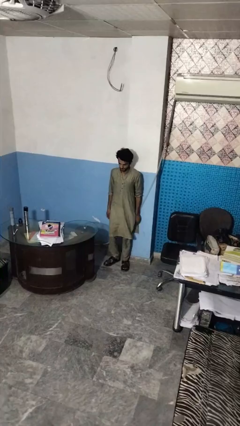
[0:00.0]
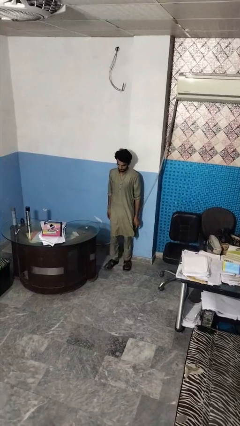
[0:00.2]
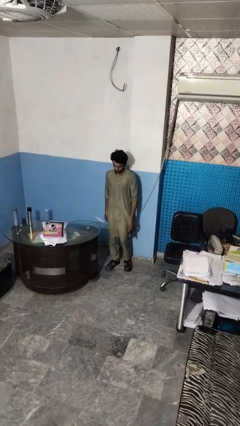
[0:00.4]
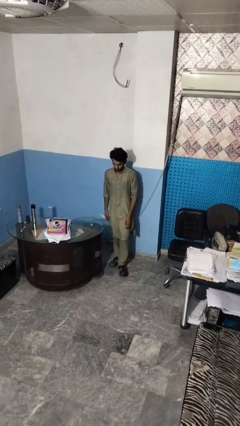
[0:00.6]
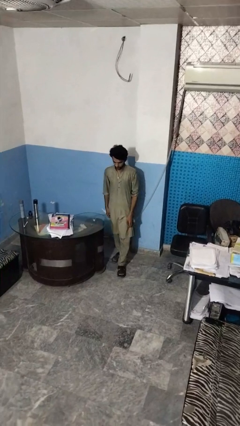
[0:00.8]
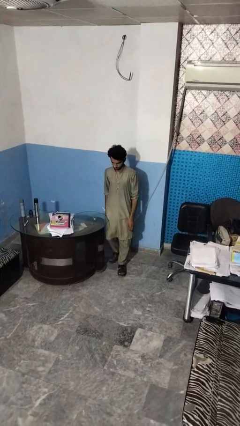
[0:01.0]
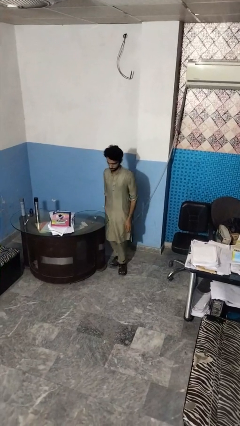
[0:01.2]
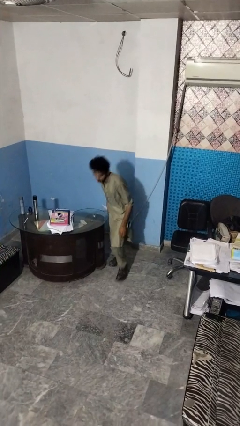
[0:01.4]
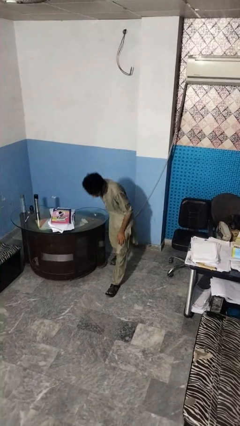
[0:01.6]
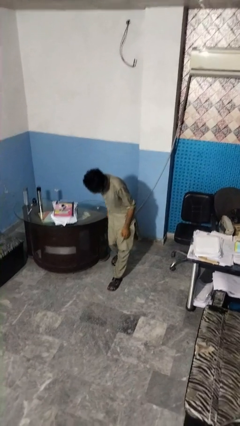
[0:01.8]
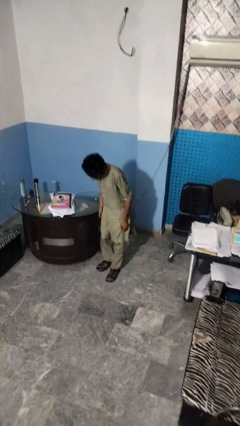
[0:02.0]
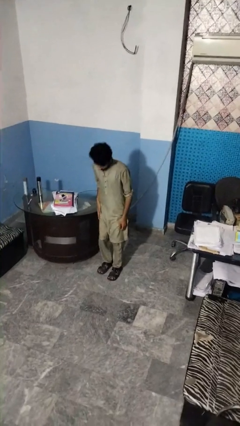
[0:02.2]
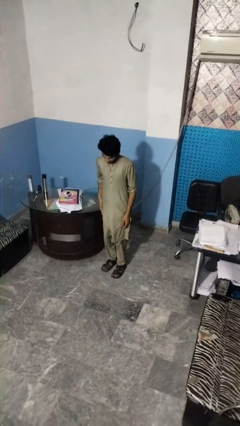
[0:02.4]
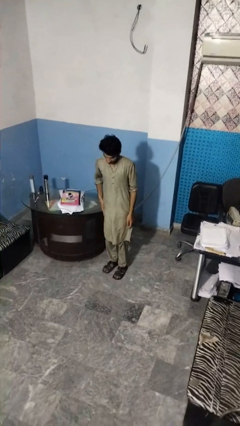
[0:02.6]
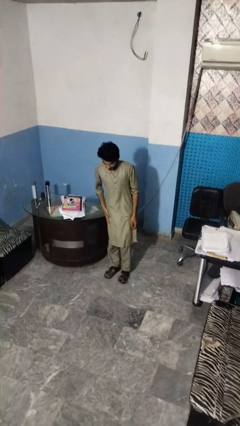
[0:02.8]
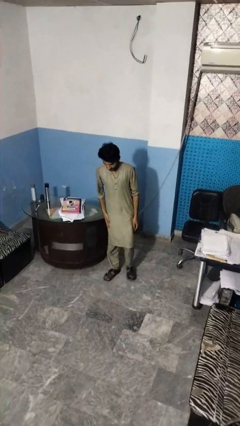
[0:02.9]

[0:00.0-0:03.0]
person bumps into table

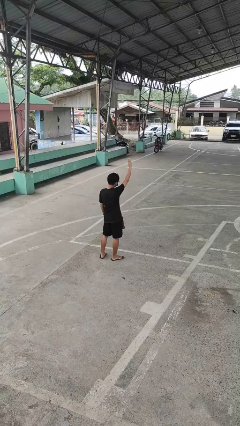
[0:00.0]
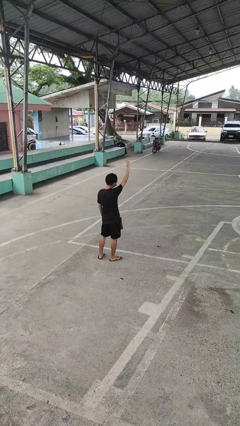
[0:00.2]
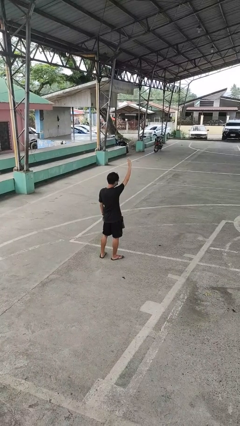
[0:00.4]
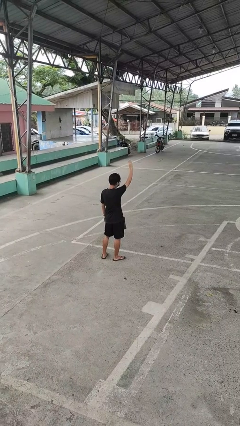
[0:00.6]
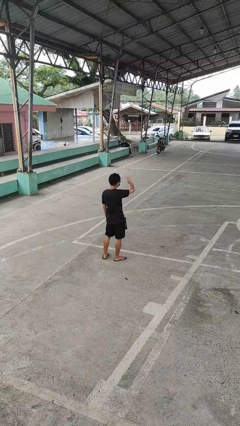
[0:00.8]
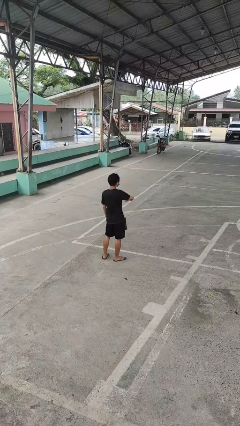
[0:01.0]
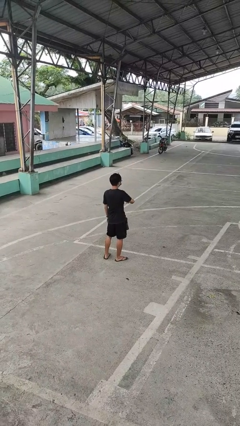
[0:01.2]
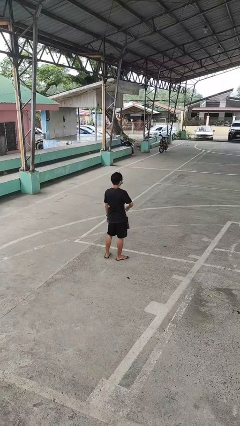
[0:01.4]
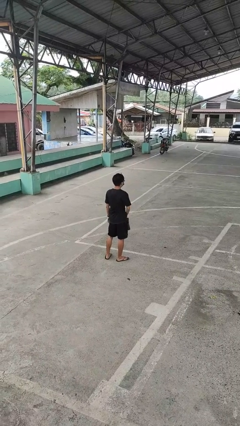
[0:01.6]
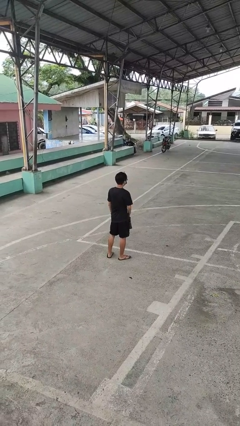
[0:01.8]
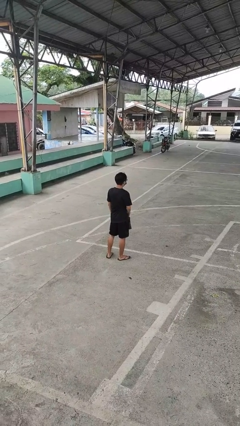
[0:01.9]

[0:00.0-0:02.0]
person gestures swipe down

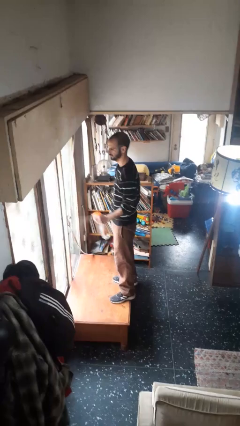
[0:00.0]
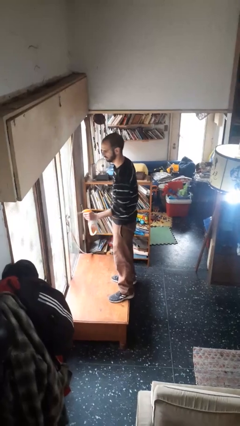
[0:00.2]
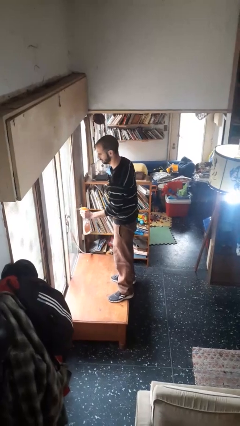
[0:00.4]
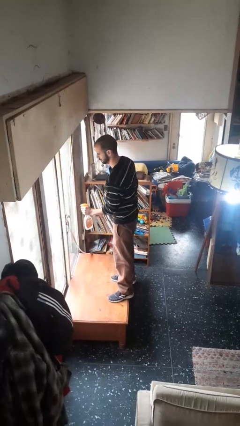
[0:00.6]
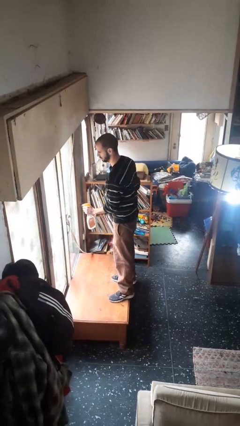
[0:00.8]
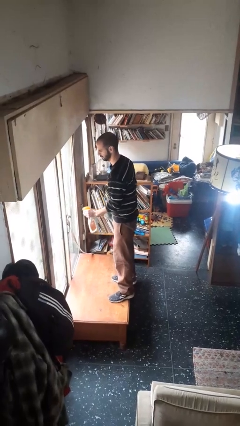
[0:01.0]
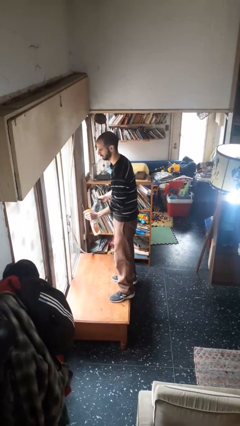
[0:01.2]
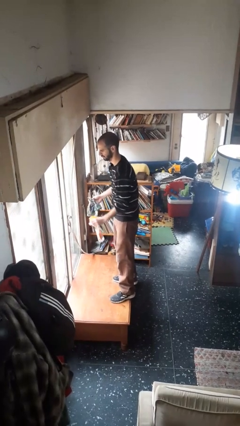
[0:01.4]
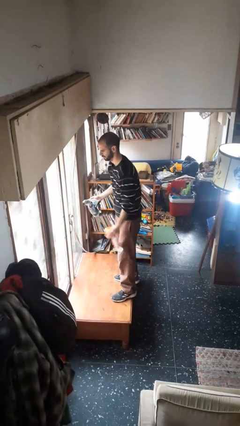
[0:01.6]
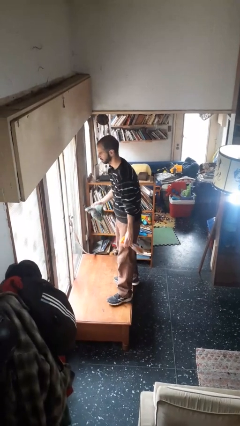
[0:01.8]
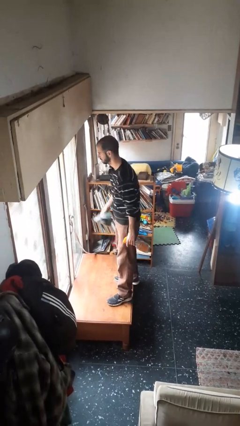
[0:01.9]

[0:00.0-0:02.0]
person sprays from bottle

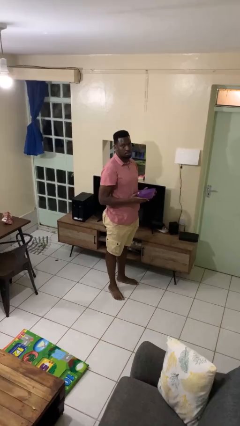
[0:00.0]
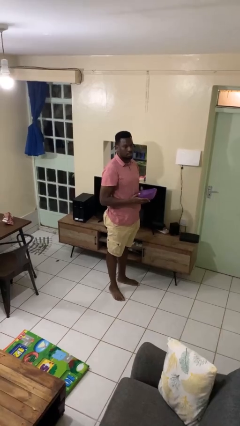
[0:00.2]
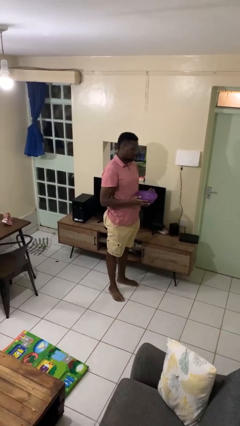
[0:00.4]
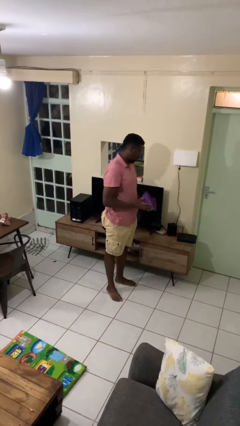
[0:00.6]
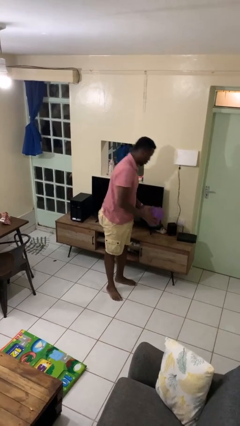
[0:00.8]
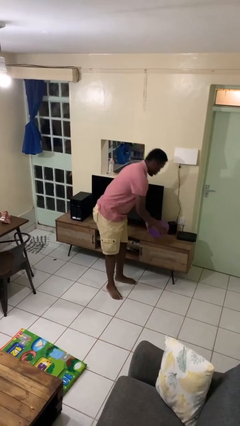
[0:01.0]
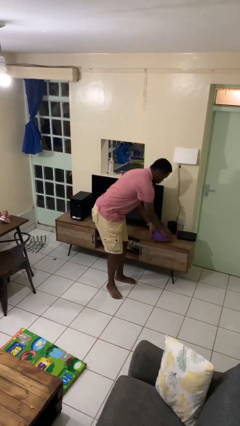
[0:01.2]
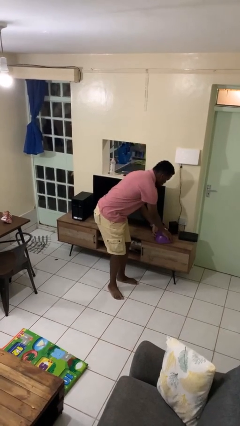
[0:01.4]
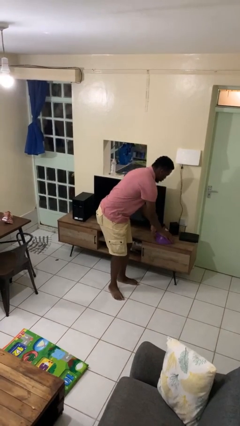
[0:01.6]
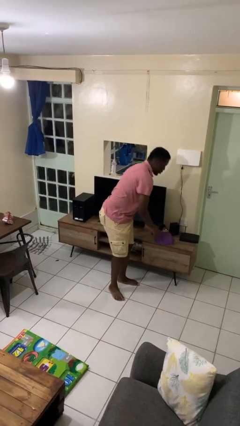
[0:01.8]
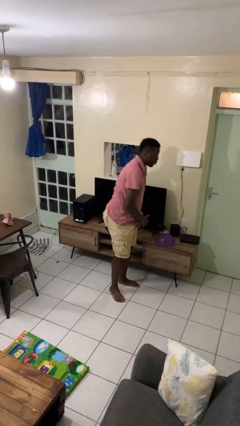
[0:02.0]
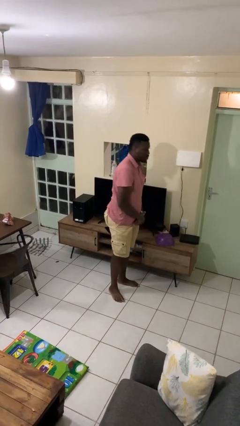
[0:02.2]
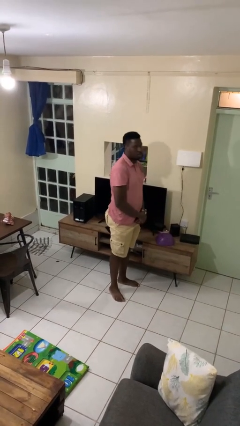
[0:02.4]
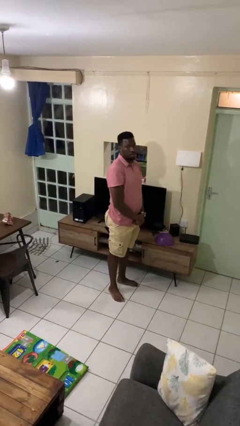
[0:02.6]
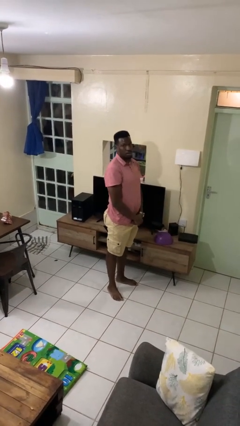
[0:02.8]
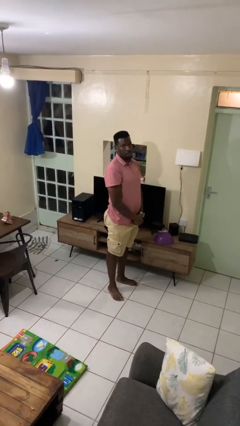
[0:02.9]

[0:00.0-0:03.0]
person puts down object on countertop

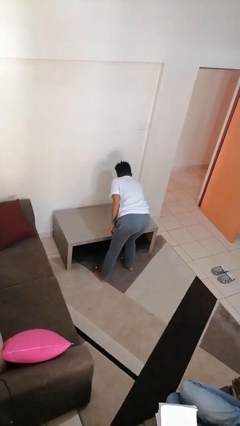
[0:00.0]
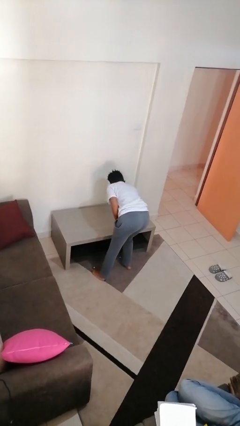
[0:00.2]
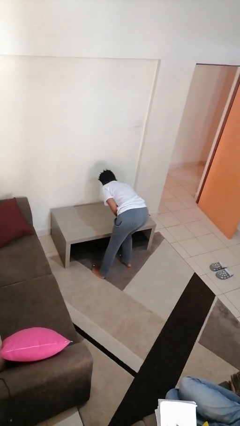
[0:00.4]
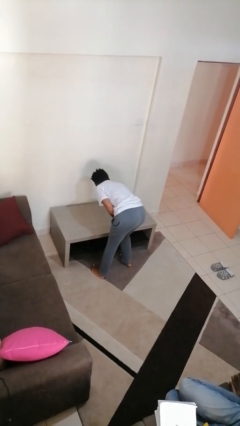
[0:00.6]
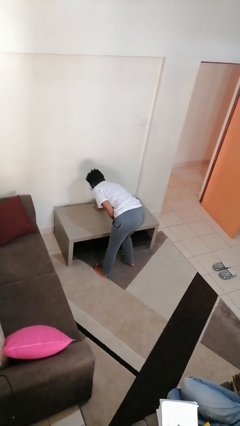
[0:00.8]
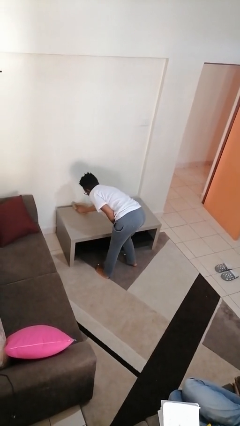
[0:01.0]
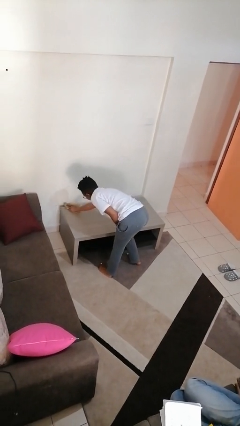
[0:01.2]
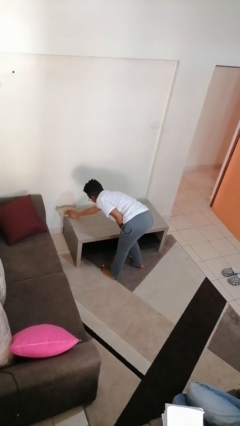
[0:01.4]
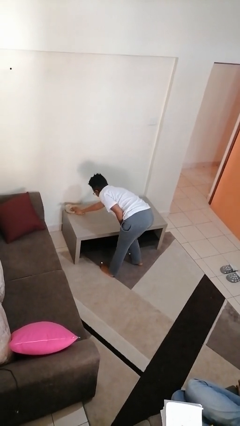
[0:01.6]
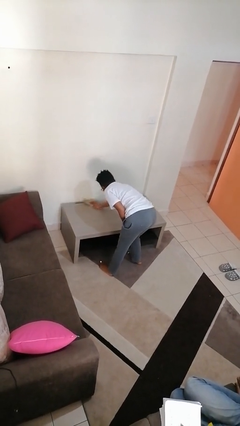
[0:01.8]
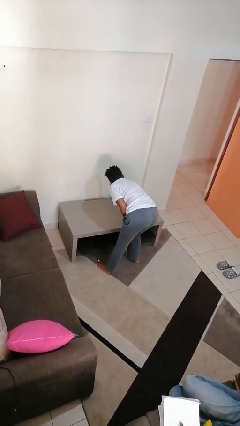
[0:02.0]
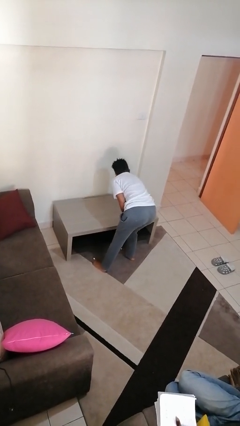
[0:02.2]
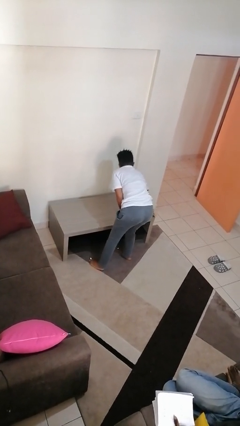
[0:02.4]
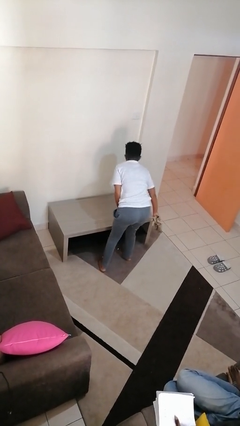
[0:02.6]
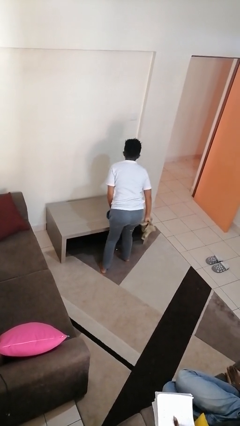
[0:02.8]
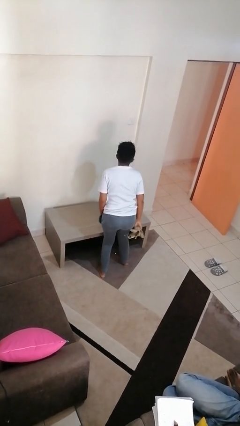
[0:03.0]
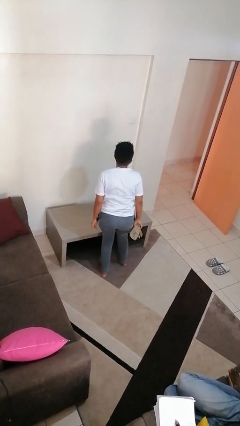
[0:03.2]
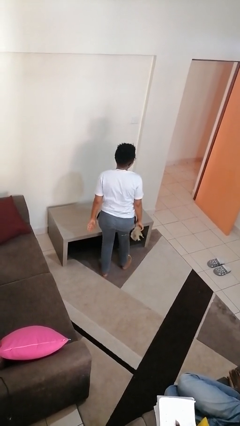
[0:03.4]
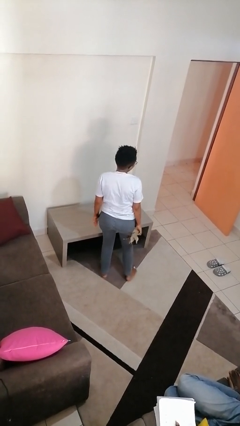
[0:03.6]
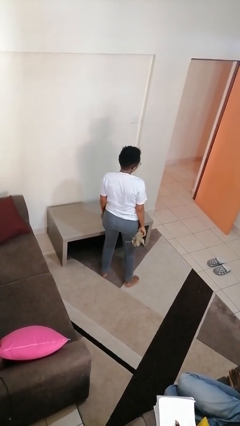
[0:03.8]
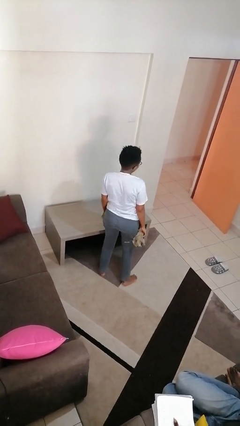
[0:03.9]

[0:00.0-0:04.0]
person cleans table with rag

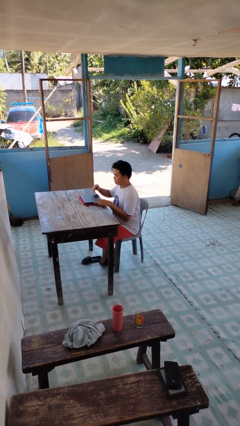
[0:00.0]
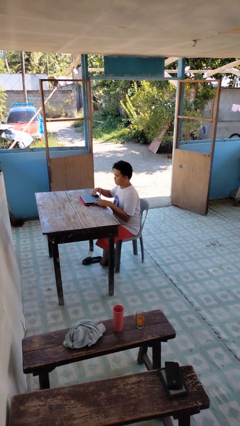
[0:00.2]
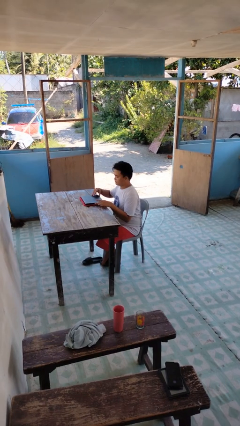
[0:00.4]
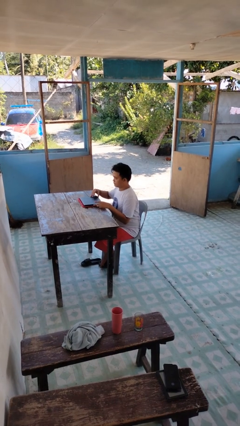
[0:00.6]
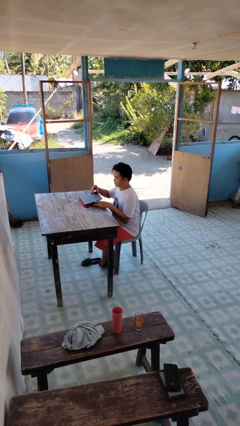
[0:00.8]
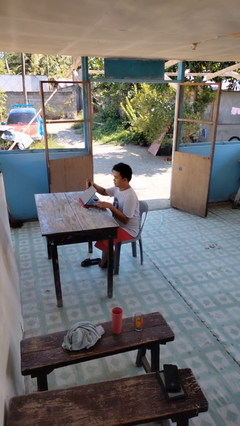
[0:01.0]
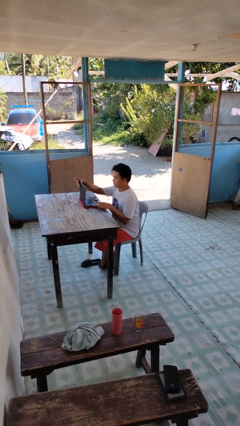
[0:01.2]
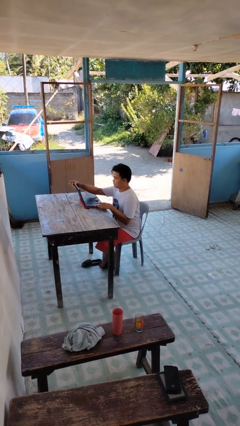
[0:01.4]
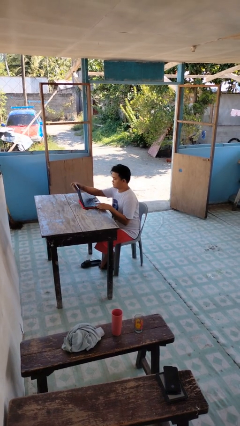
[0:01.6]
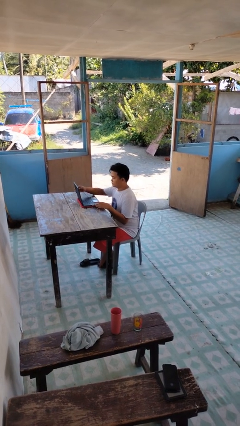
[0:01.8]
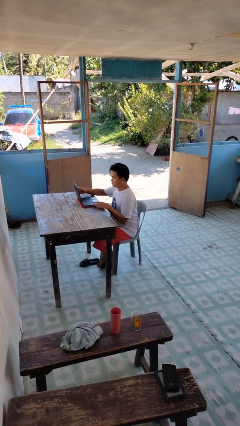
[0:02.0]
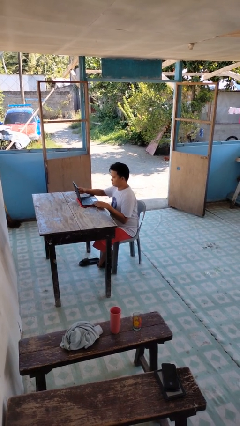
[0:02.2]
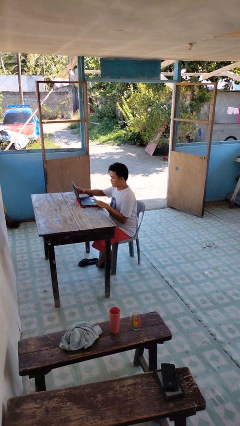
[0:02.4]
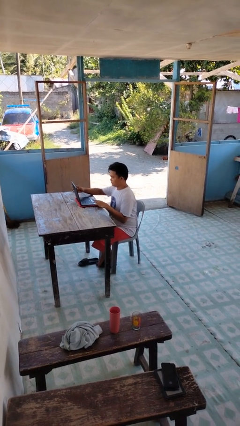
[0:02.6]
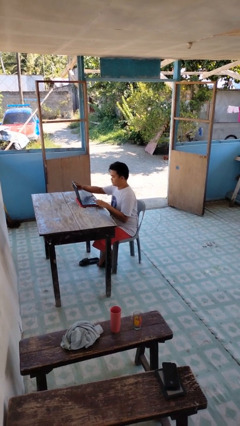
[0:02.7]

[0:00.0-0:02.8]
person opens laptop

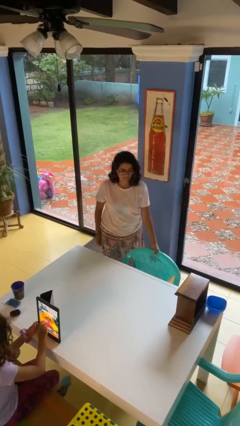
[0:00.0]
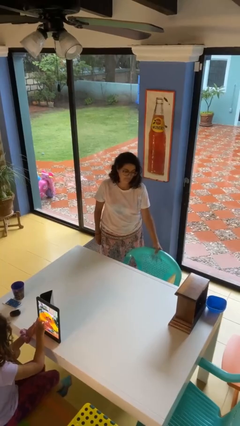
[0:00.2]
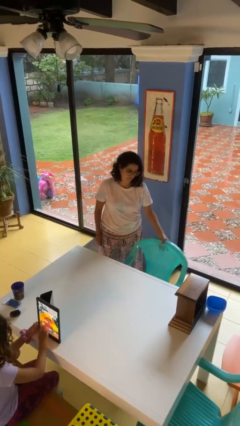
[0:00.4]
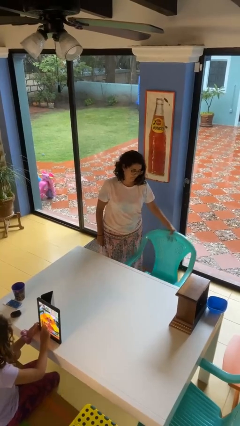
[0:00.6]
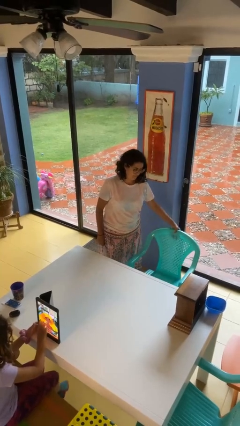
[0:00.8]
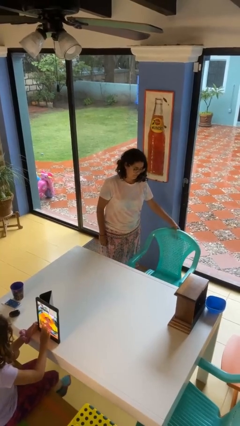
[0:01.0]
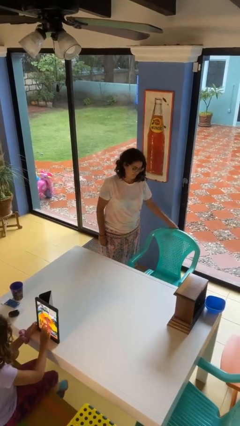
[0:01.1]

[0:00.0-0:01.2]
person pulls out chair
